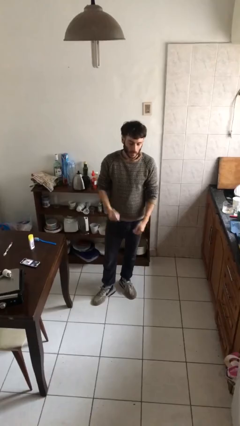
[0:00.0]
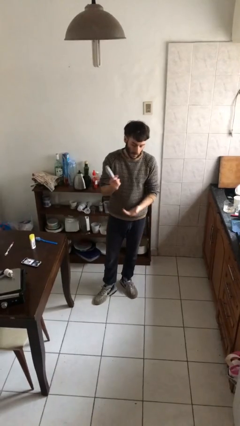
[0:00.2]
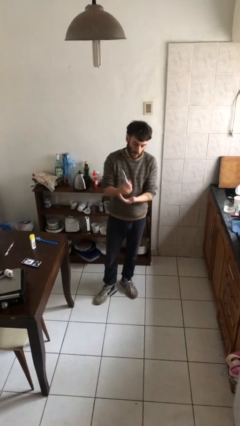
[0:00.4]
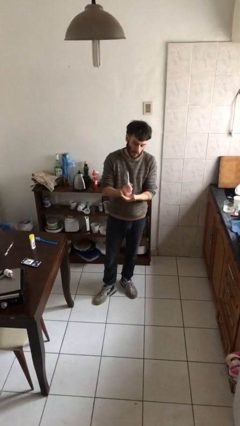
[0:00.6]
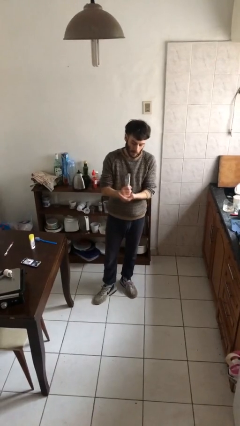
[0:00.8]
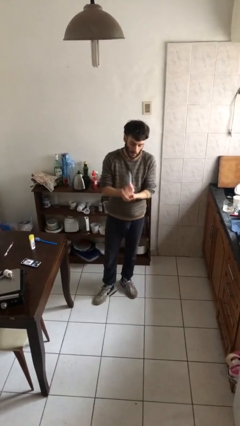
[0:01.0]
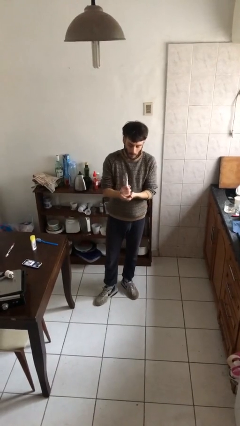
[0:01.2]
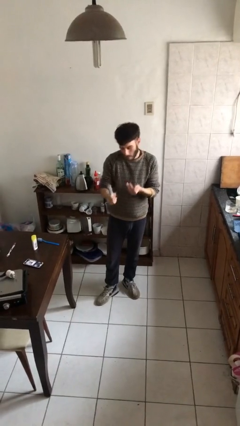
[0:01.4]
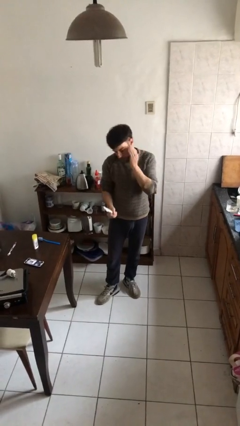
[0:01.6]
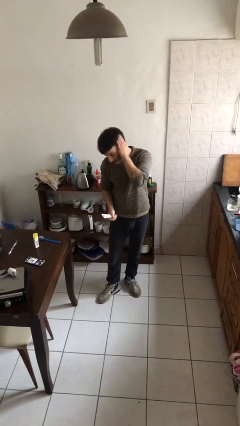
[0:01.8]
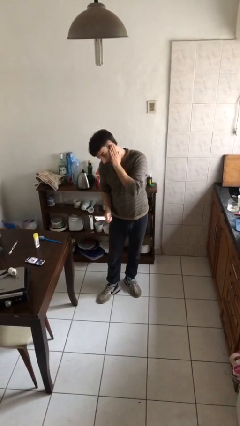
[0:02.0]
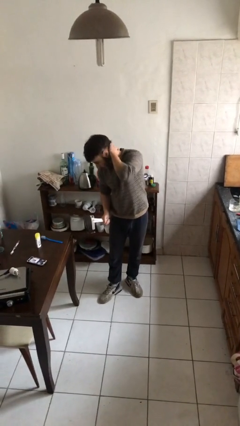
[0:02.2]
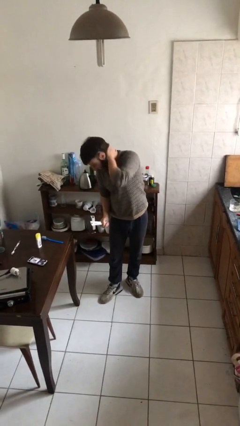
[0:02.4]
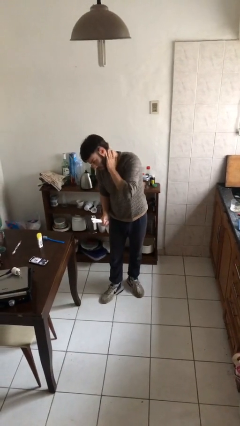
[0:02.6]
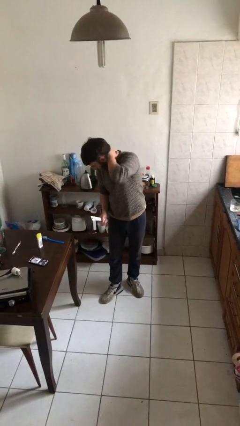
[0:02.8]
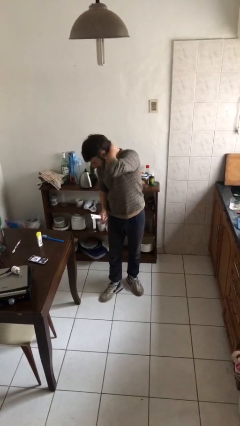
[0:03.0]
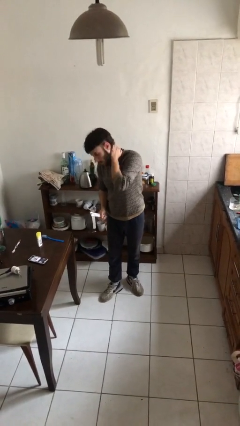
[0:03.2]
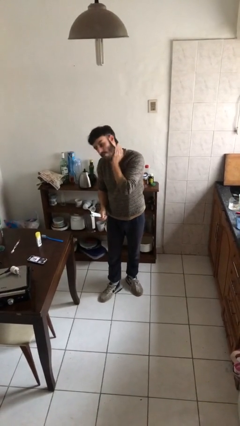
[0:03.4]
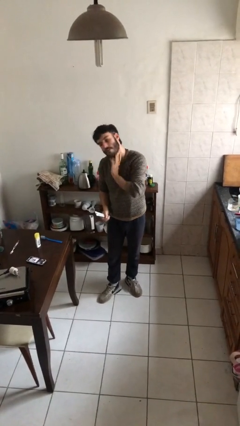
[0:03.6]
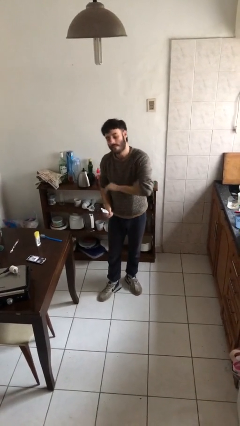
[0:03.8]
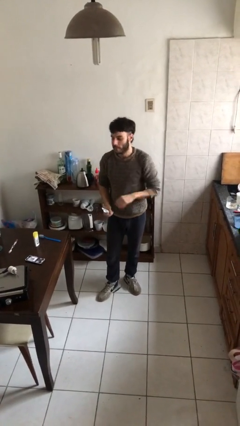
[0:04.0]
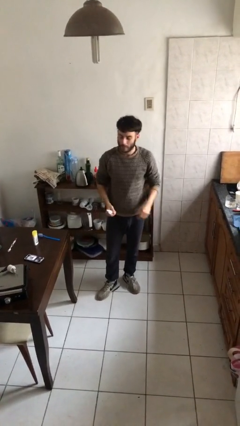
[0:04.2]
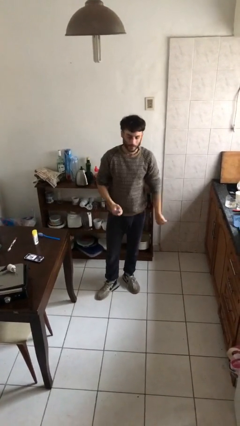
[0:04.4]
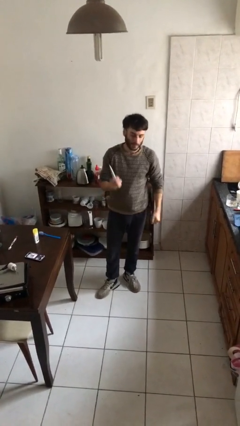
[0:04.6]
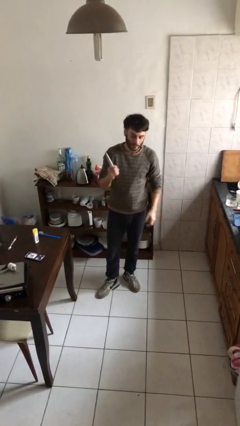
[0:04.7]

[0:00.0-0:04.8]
person applies sunscreen

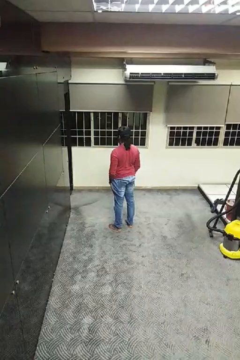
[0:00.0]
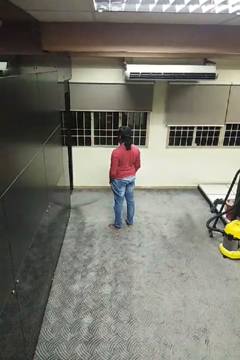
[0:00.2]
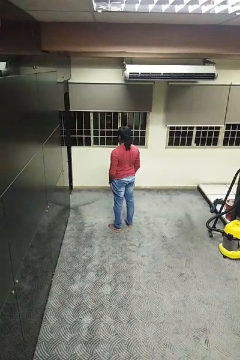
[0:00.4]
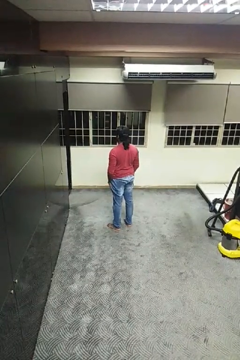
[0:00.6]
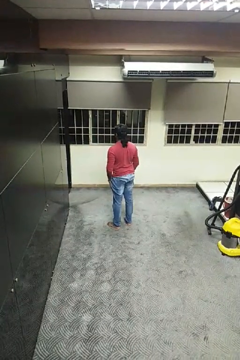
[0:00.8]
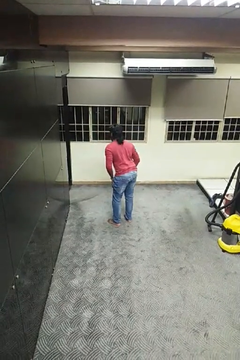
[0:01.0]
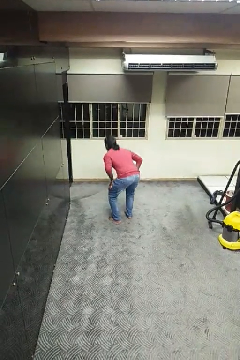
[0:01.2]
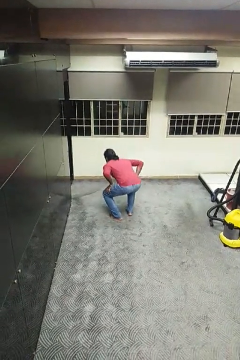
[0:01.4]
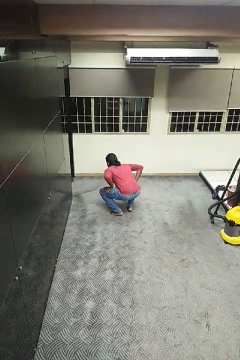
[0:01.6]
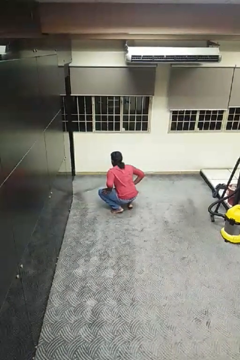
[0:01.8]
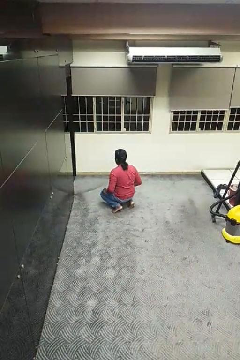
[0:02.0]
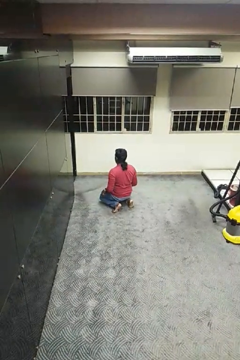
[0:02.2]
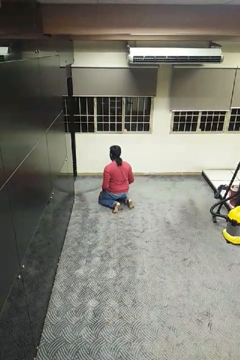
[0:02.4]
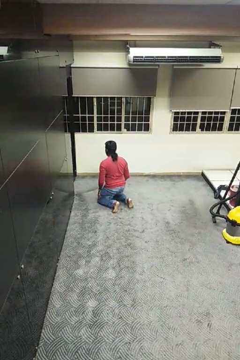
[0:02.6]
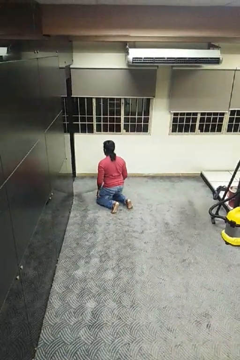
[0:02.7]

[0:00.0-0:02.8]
person kneels

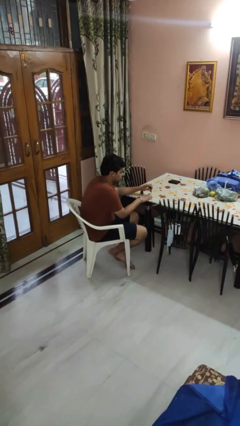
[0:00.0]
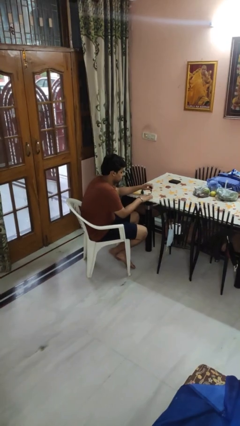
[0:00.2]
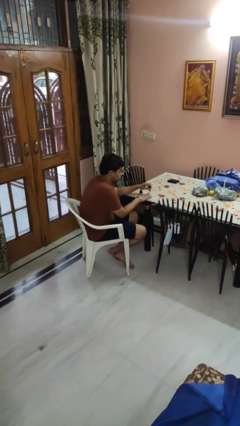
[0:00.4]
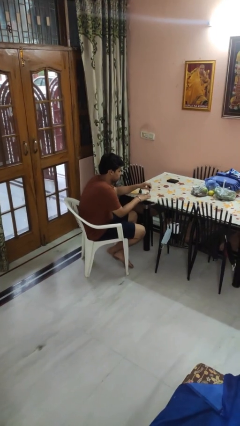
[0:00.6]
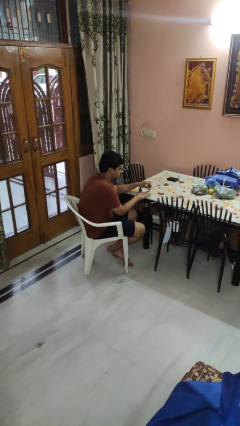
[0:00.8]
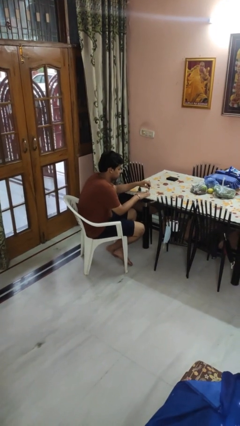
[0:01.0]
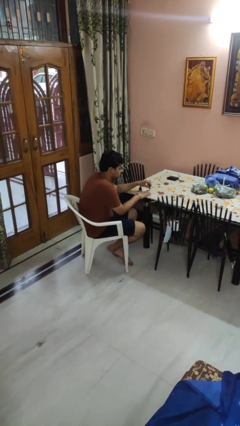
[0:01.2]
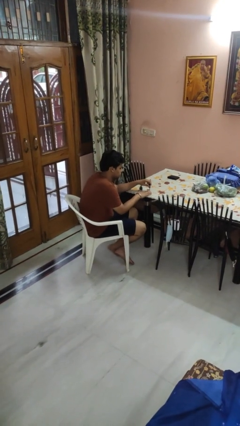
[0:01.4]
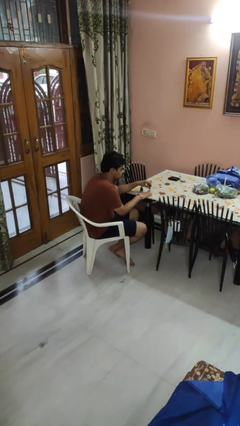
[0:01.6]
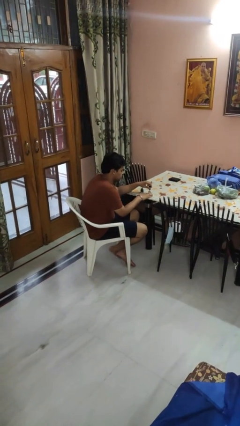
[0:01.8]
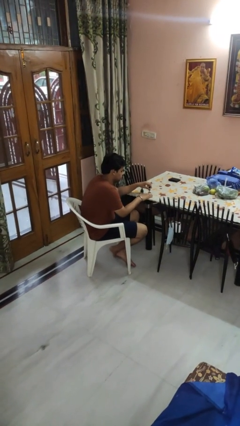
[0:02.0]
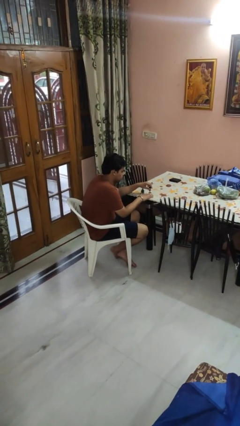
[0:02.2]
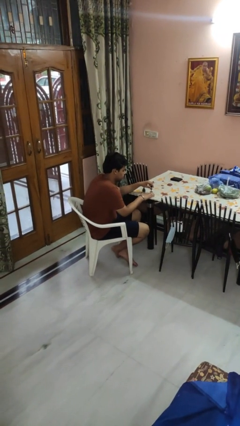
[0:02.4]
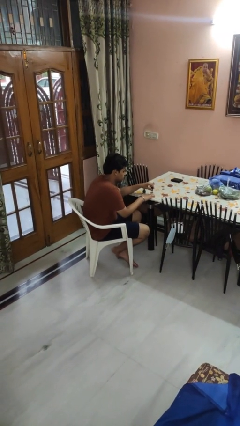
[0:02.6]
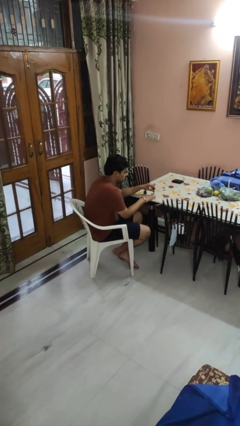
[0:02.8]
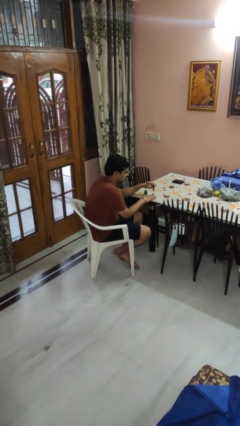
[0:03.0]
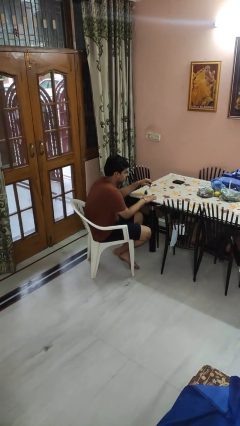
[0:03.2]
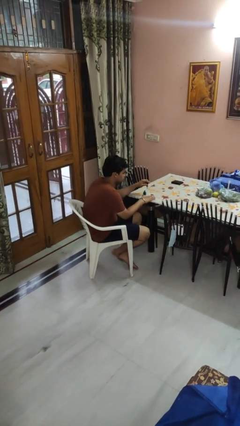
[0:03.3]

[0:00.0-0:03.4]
person paints fingernails

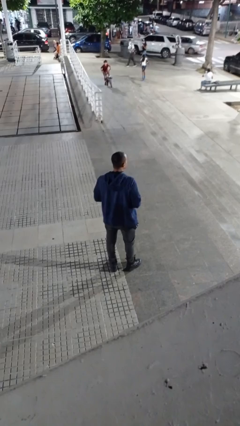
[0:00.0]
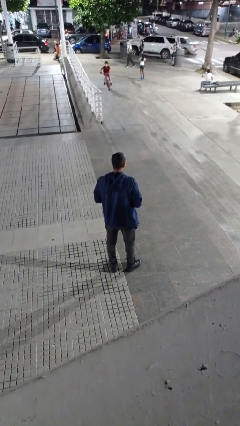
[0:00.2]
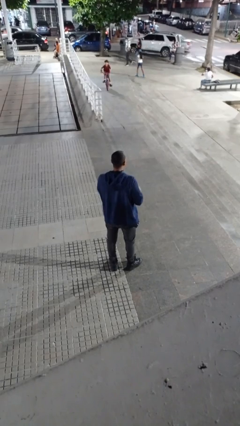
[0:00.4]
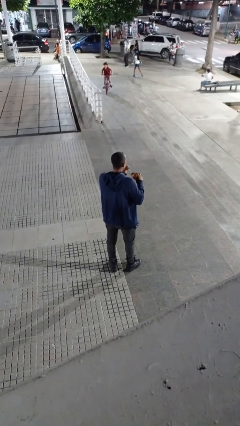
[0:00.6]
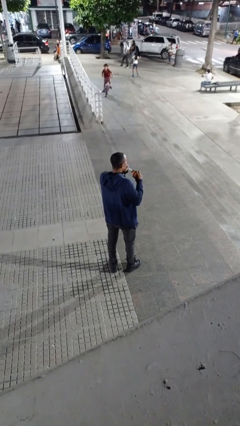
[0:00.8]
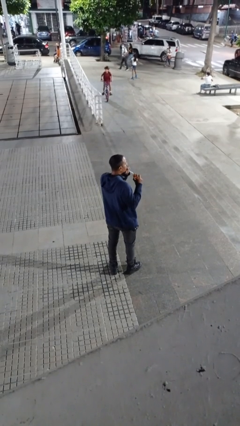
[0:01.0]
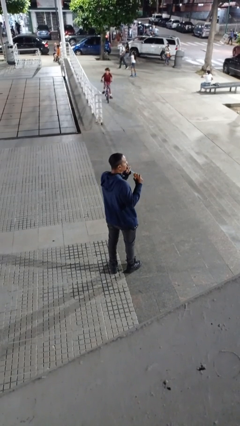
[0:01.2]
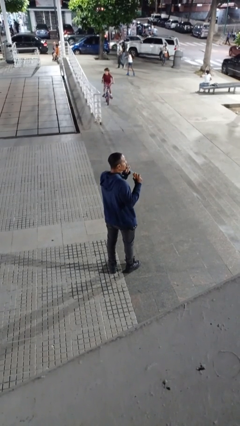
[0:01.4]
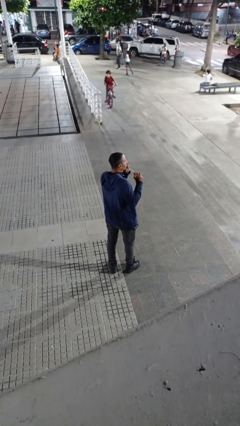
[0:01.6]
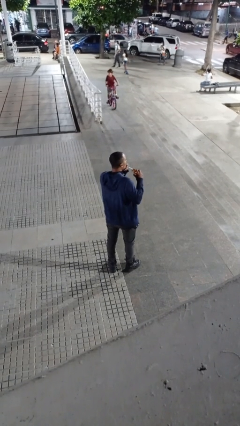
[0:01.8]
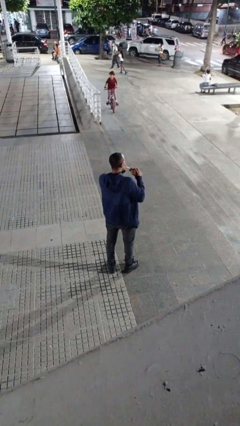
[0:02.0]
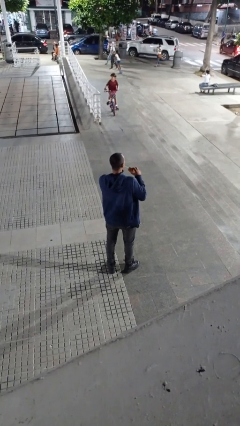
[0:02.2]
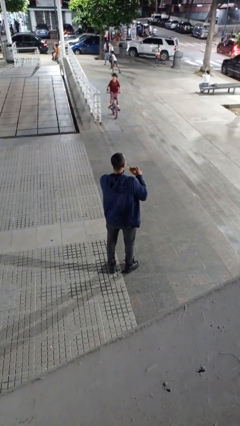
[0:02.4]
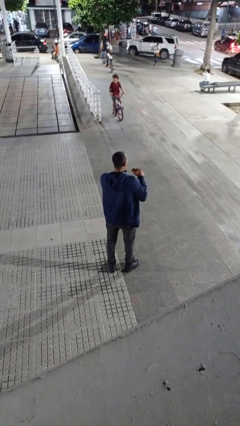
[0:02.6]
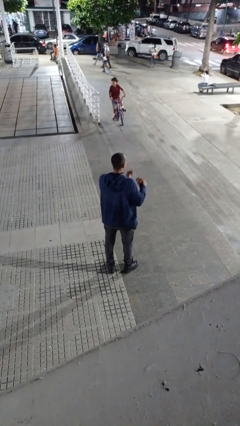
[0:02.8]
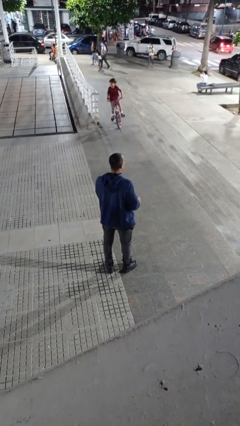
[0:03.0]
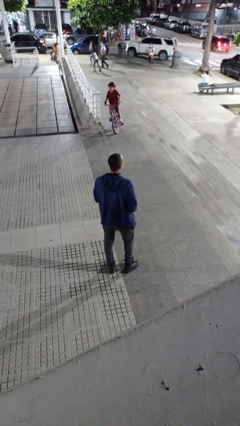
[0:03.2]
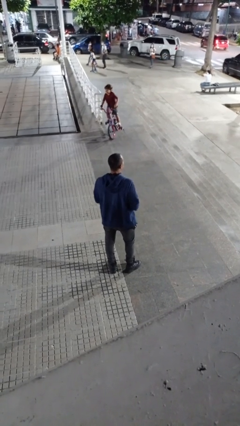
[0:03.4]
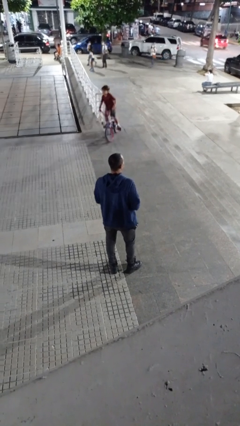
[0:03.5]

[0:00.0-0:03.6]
person drinks from straw

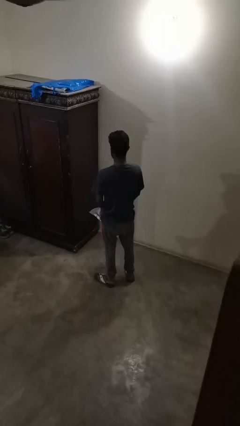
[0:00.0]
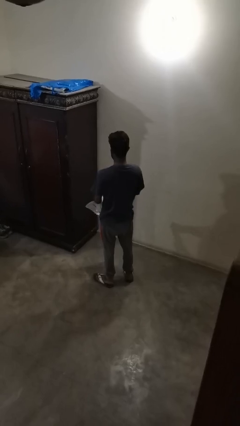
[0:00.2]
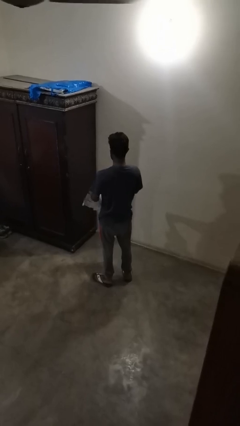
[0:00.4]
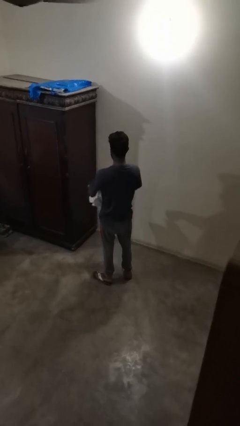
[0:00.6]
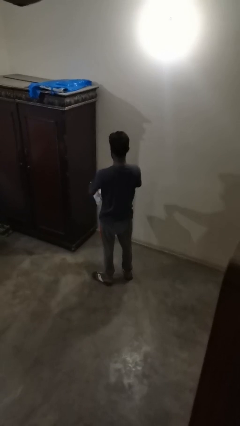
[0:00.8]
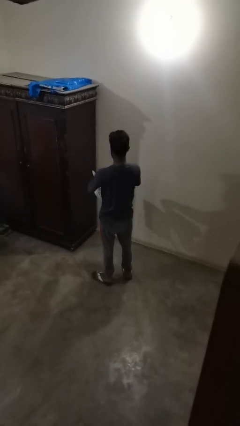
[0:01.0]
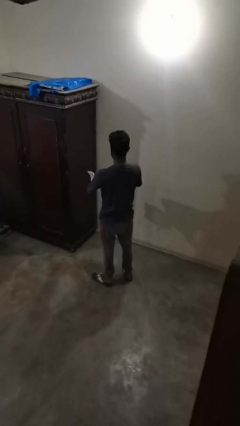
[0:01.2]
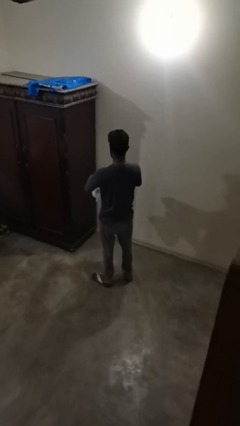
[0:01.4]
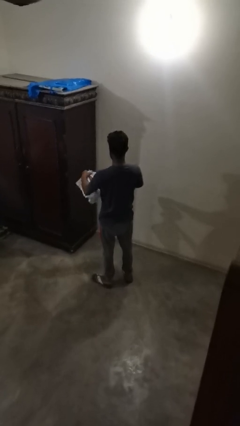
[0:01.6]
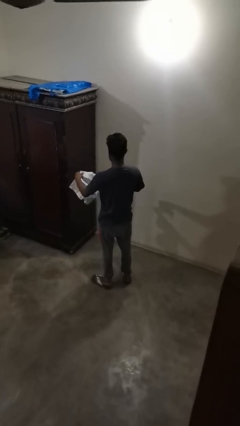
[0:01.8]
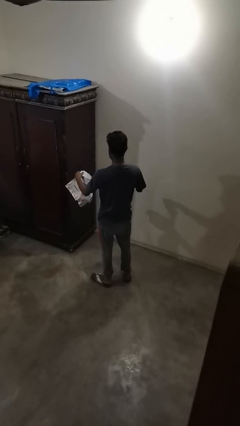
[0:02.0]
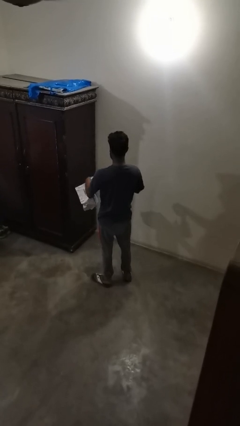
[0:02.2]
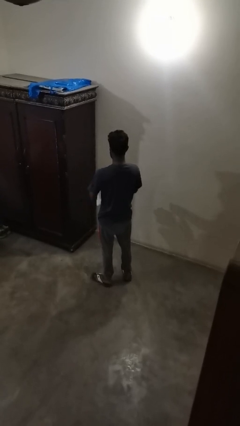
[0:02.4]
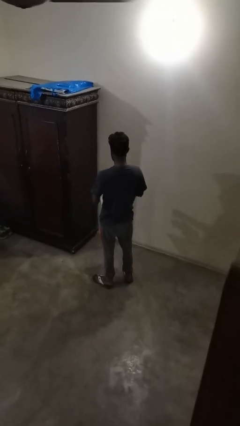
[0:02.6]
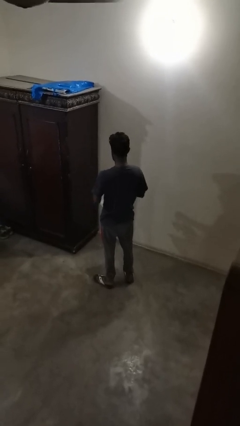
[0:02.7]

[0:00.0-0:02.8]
person tears paper

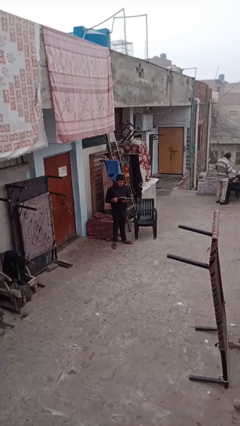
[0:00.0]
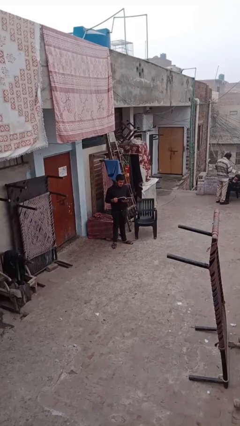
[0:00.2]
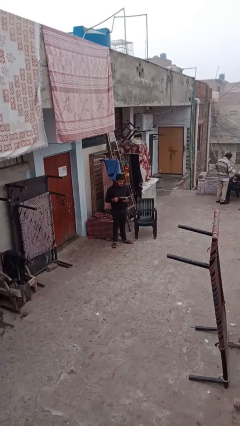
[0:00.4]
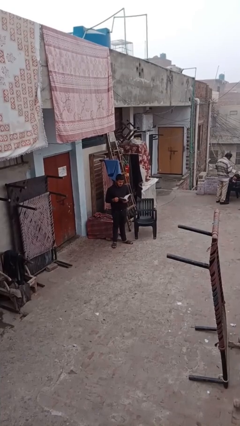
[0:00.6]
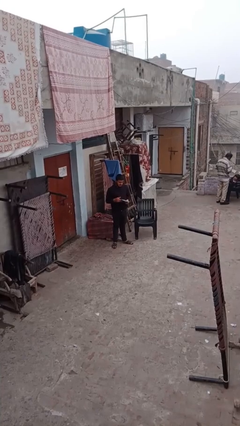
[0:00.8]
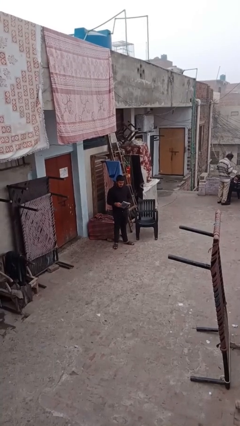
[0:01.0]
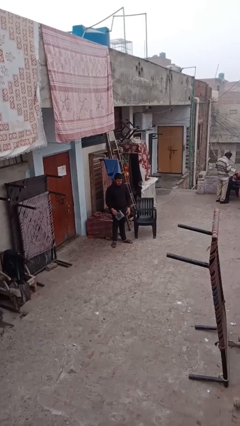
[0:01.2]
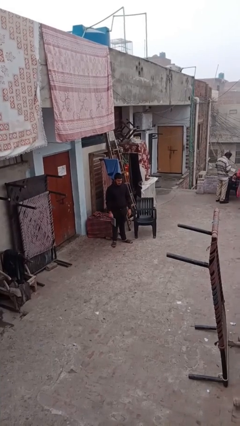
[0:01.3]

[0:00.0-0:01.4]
person reads document
